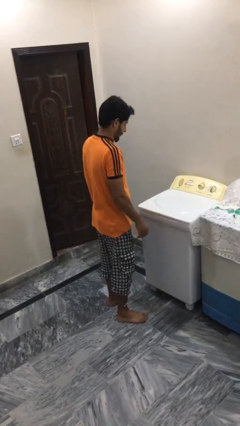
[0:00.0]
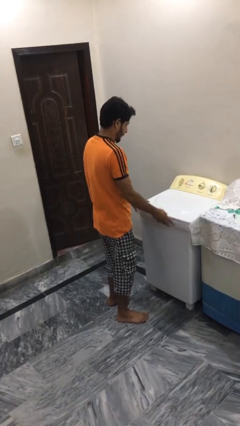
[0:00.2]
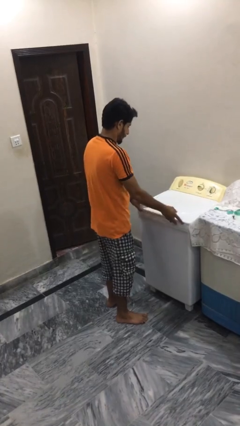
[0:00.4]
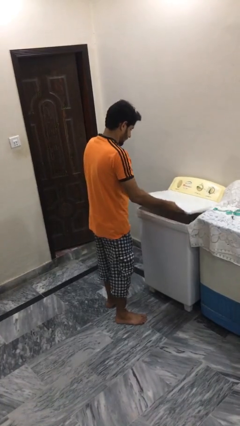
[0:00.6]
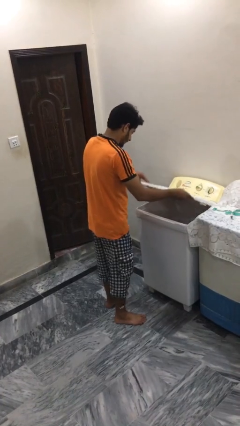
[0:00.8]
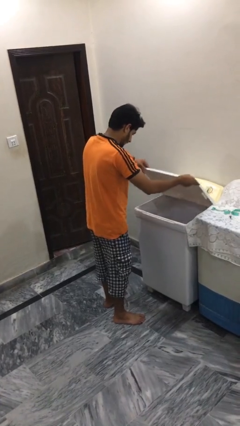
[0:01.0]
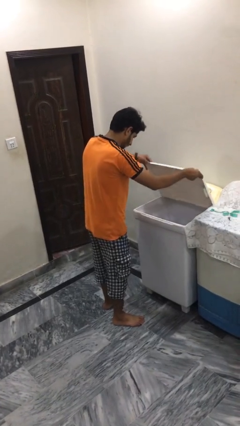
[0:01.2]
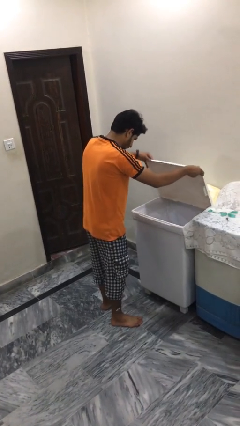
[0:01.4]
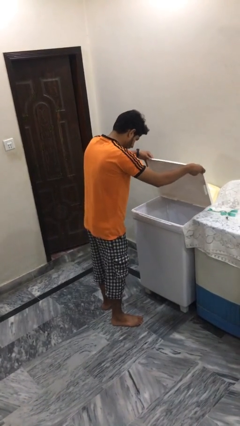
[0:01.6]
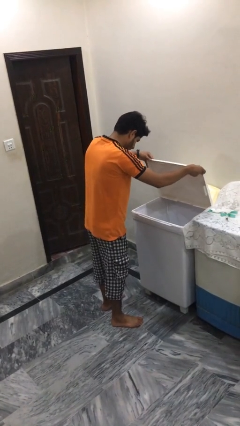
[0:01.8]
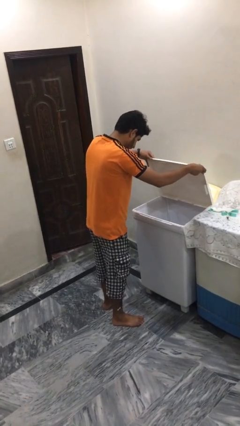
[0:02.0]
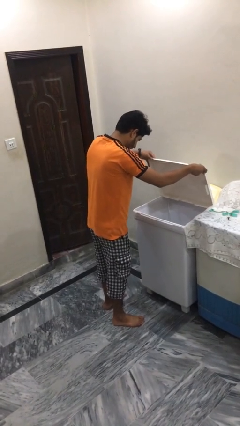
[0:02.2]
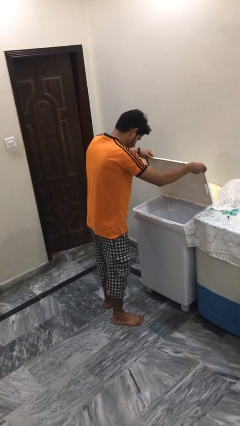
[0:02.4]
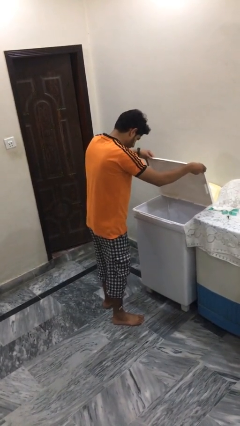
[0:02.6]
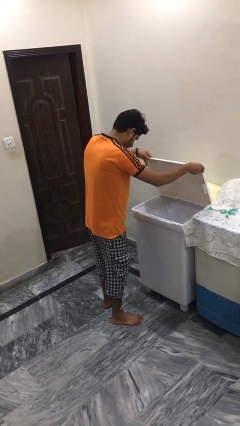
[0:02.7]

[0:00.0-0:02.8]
person opens clothes washer

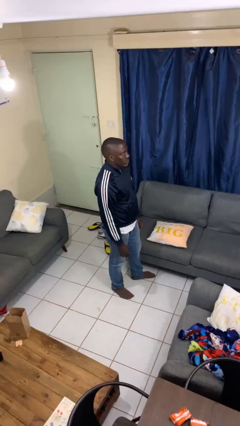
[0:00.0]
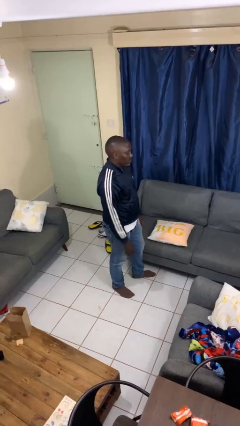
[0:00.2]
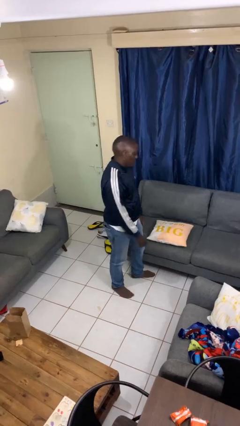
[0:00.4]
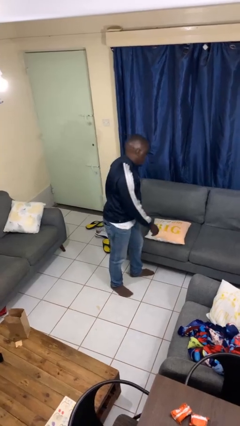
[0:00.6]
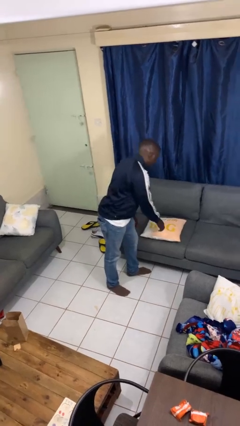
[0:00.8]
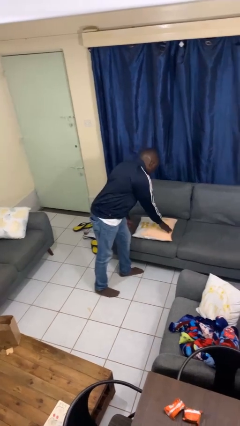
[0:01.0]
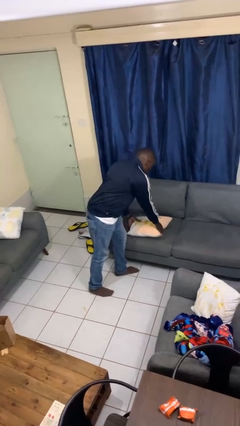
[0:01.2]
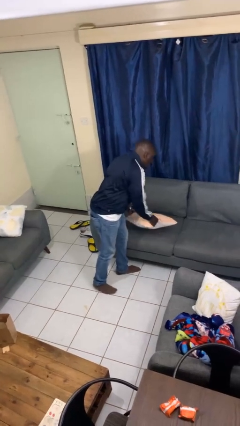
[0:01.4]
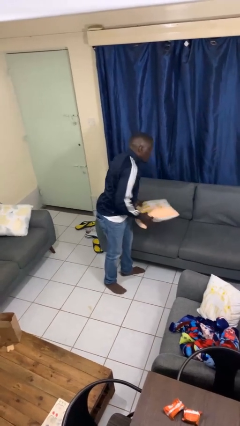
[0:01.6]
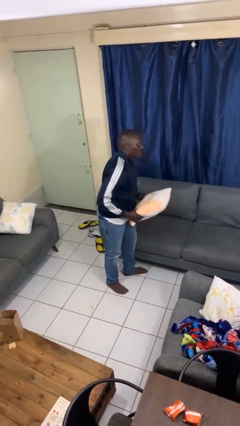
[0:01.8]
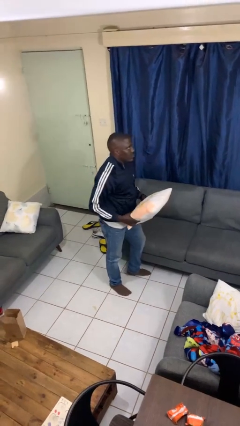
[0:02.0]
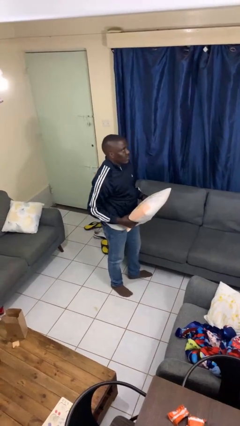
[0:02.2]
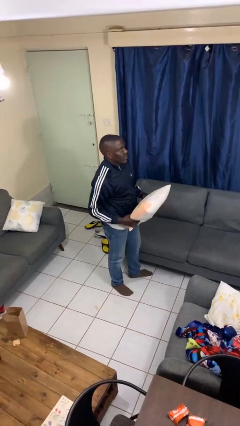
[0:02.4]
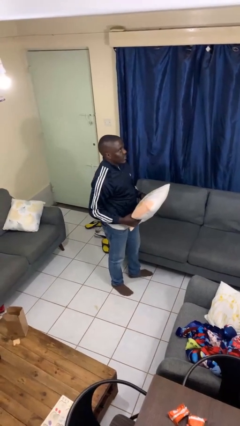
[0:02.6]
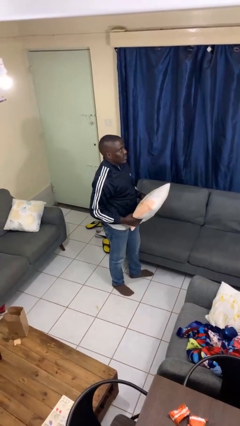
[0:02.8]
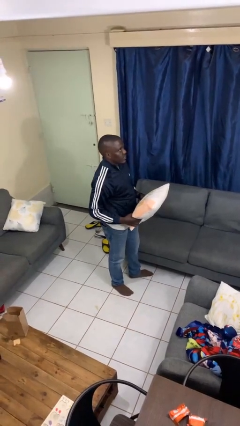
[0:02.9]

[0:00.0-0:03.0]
person picks up object from couch

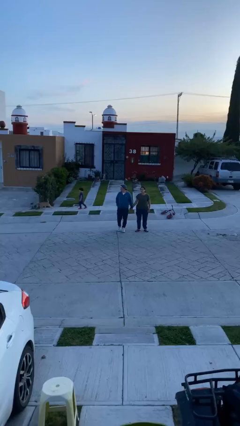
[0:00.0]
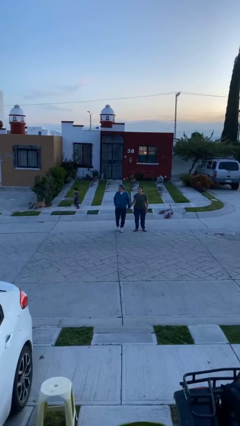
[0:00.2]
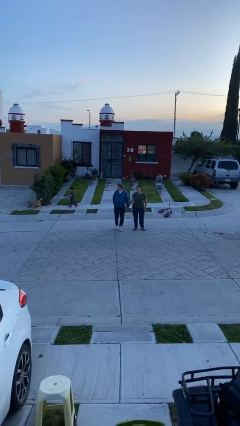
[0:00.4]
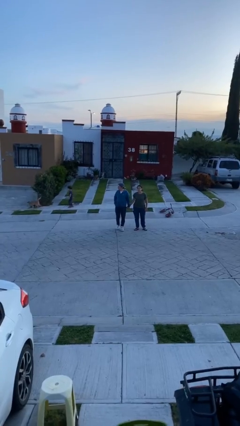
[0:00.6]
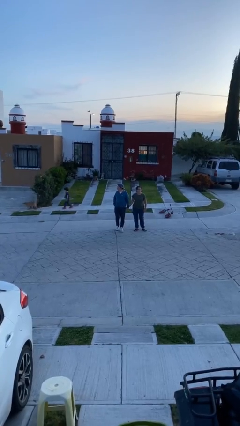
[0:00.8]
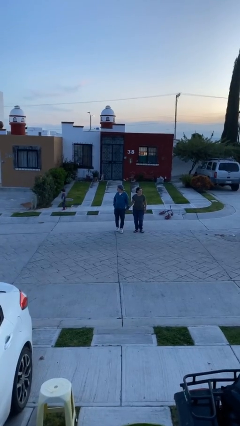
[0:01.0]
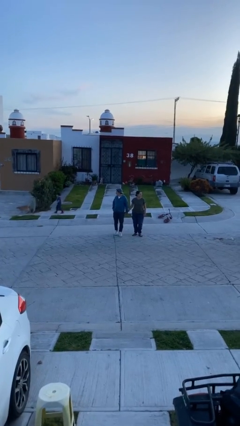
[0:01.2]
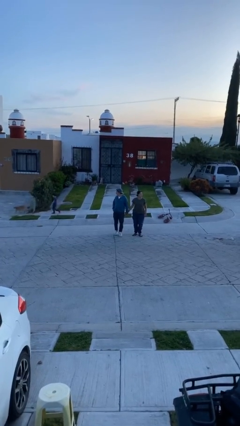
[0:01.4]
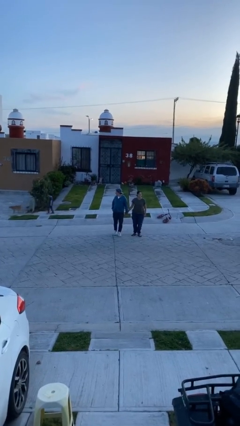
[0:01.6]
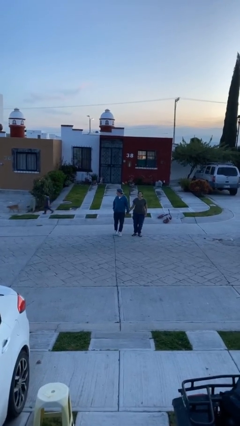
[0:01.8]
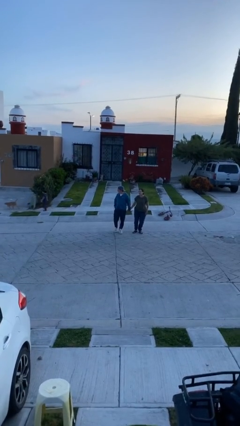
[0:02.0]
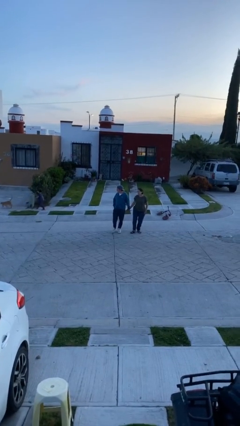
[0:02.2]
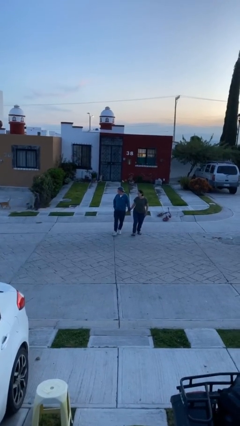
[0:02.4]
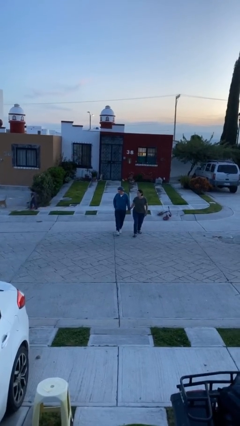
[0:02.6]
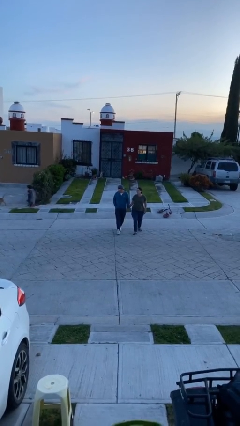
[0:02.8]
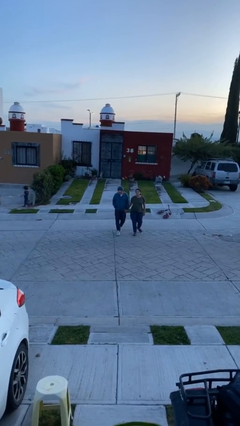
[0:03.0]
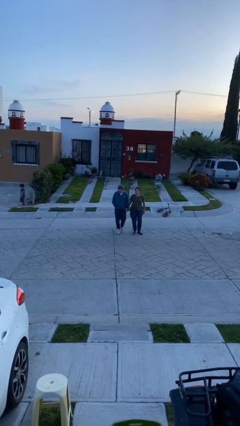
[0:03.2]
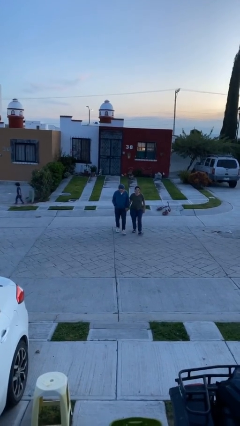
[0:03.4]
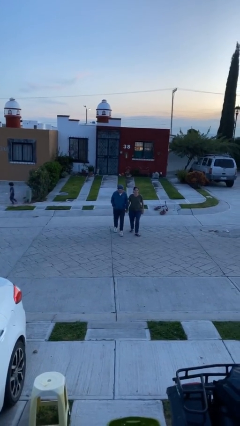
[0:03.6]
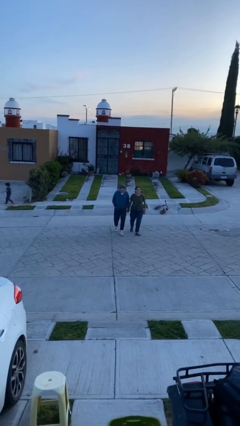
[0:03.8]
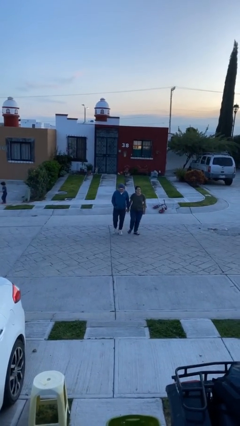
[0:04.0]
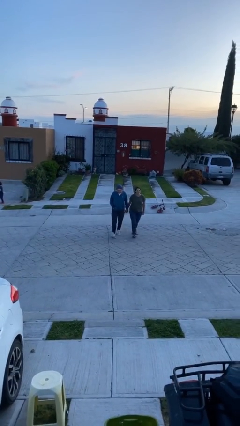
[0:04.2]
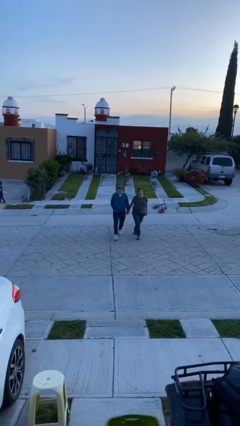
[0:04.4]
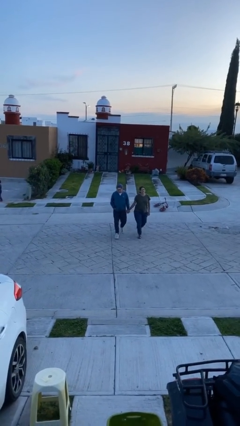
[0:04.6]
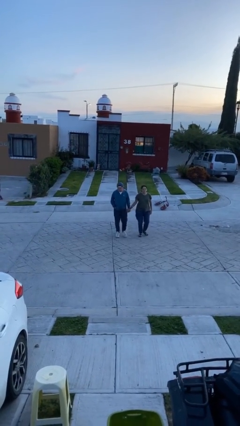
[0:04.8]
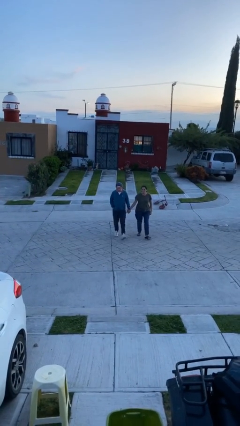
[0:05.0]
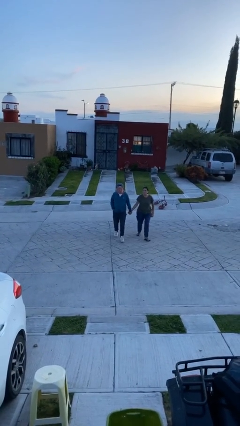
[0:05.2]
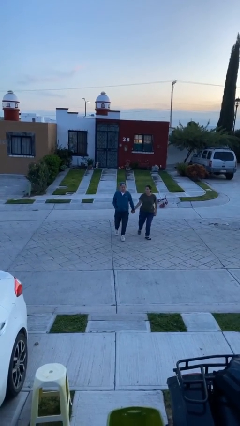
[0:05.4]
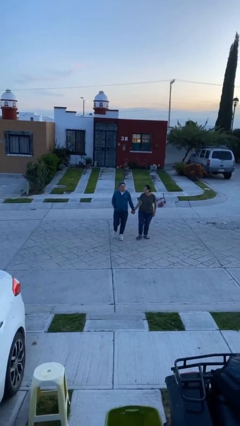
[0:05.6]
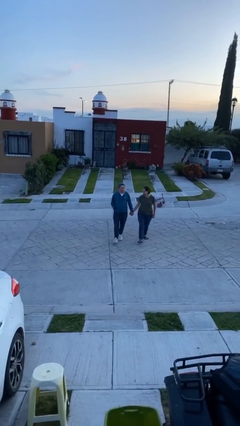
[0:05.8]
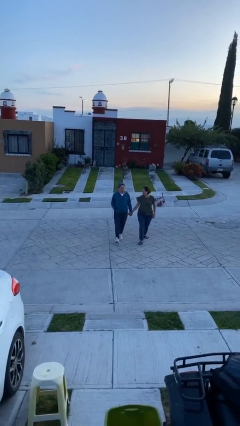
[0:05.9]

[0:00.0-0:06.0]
person holds hand

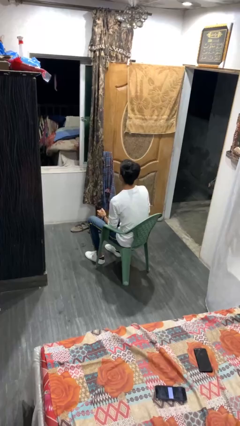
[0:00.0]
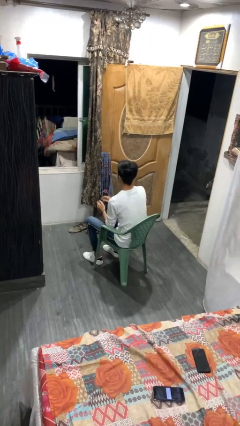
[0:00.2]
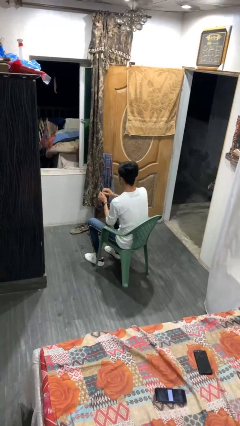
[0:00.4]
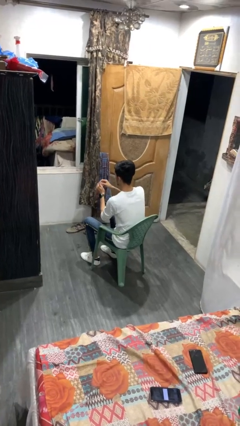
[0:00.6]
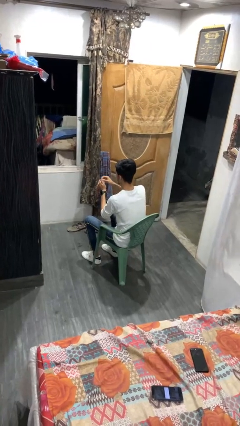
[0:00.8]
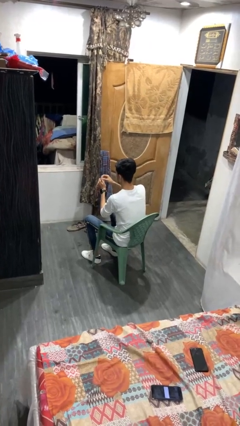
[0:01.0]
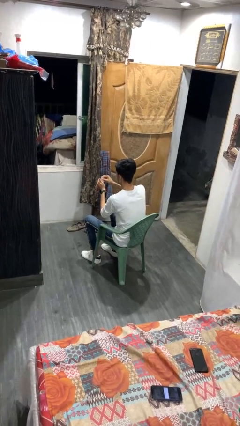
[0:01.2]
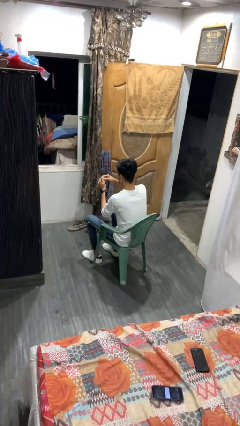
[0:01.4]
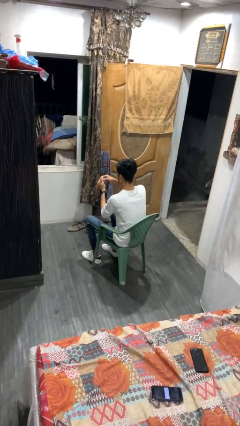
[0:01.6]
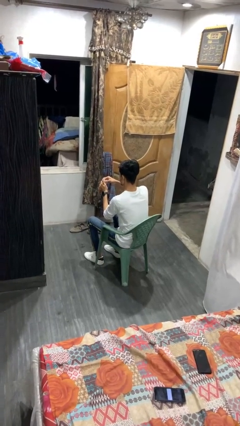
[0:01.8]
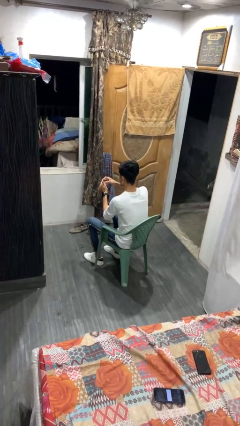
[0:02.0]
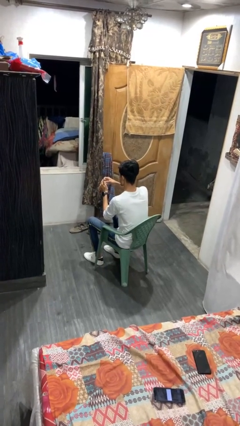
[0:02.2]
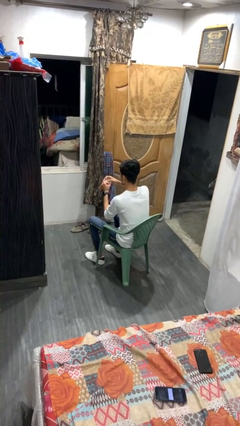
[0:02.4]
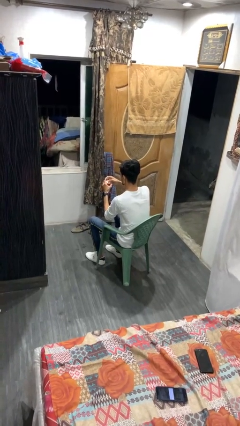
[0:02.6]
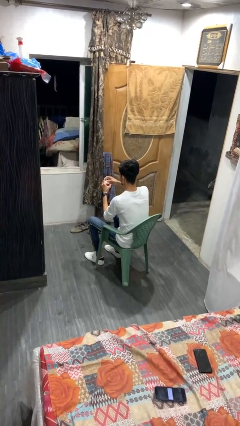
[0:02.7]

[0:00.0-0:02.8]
person opens beverage can

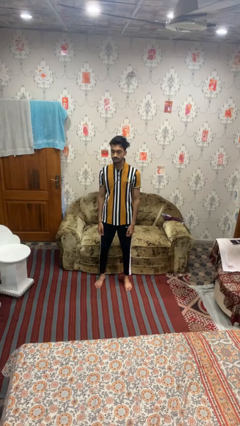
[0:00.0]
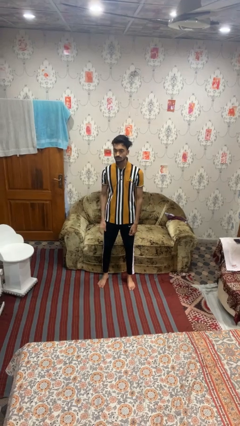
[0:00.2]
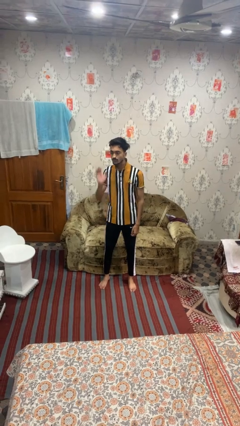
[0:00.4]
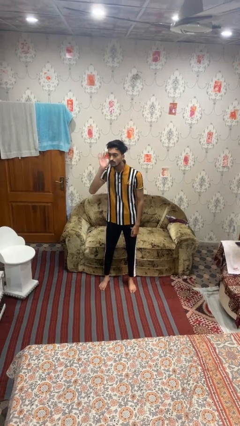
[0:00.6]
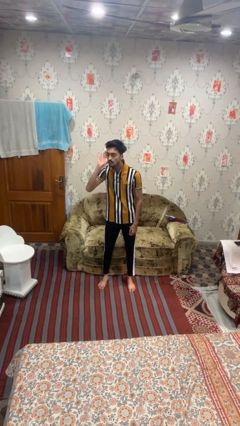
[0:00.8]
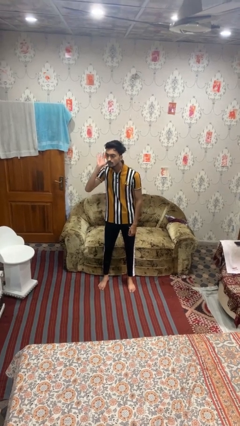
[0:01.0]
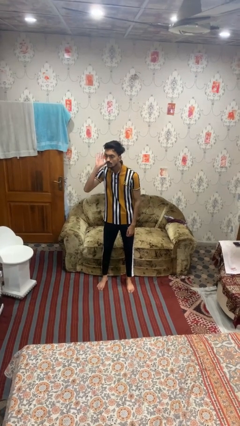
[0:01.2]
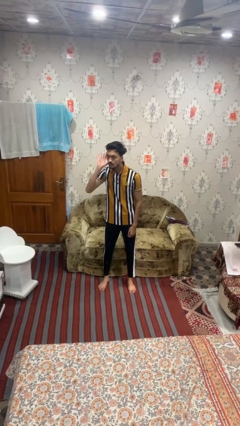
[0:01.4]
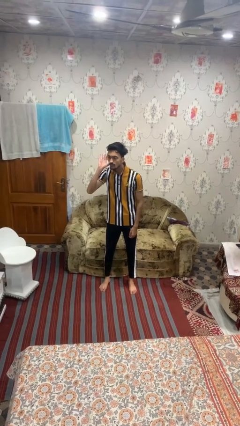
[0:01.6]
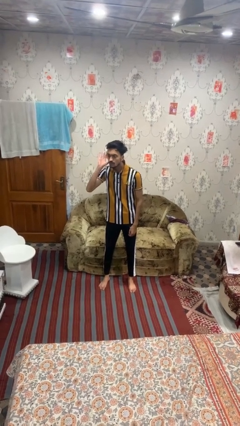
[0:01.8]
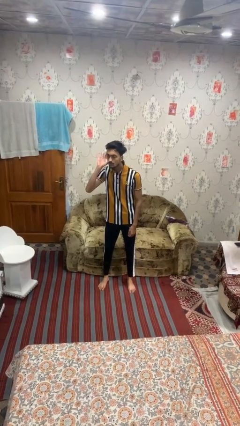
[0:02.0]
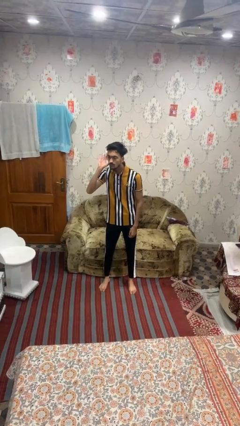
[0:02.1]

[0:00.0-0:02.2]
person gestures listen closely

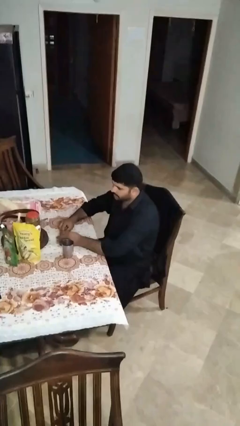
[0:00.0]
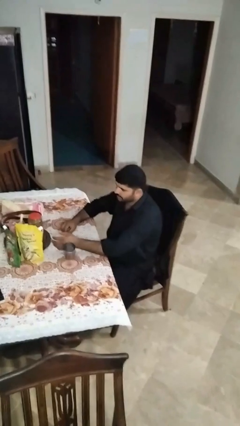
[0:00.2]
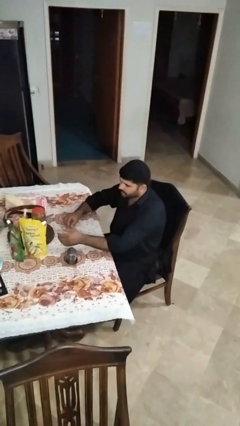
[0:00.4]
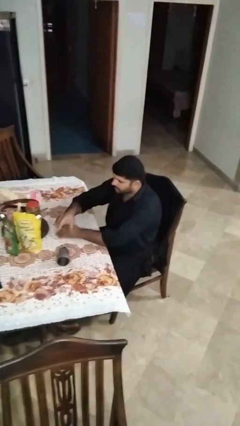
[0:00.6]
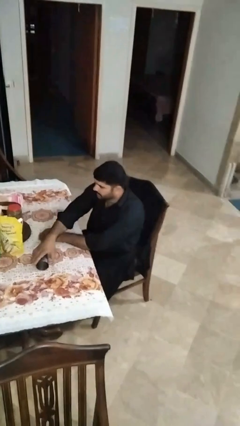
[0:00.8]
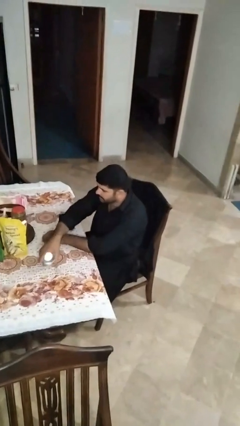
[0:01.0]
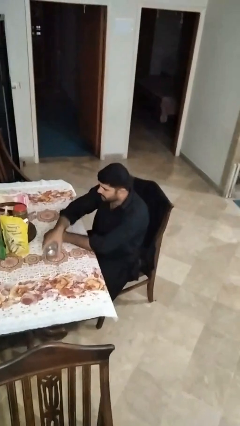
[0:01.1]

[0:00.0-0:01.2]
person knocks over glass
